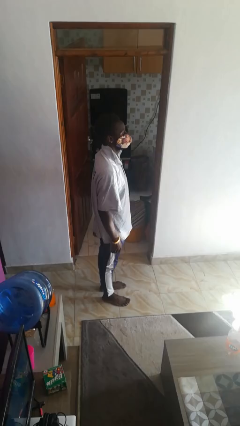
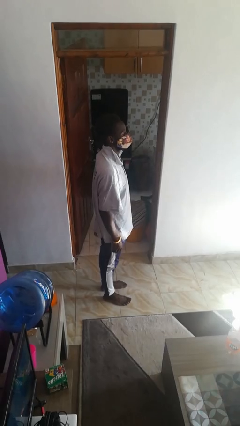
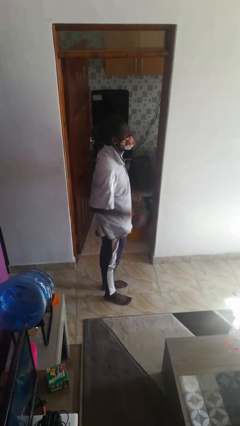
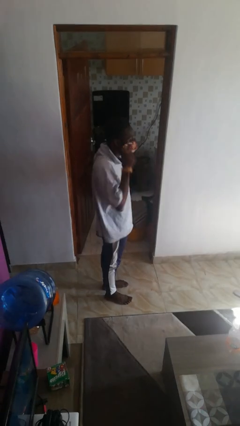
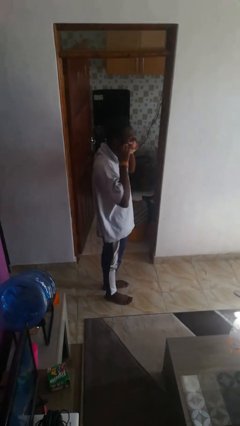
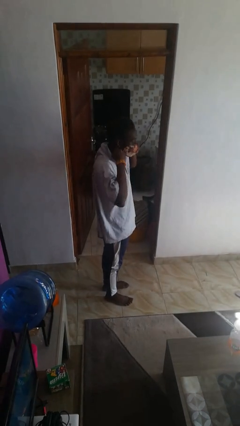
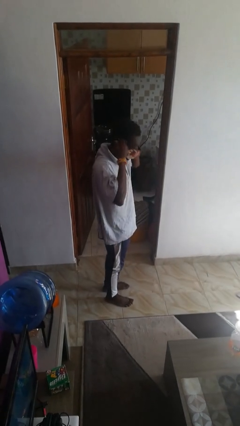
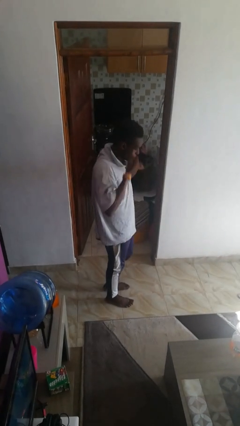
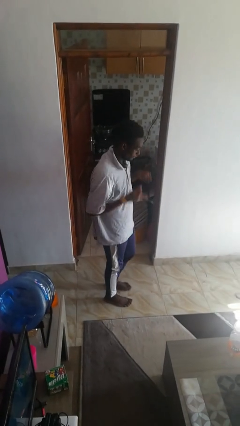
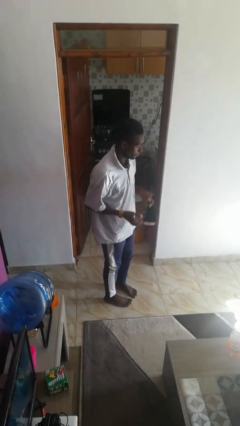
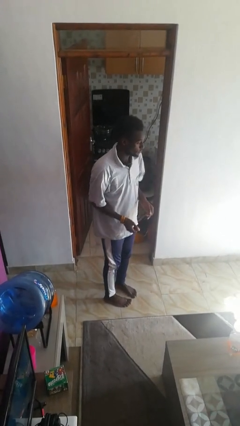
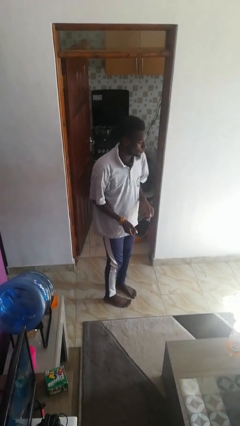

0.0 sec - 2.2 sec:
person takes off facemask

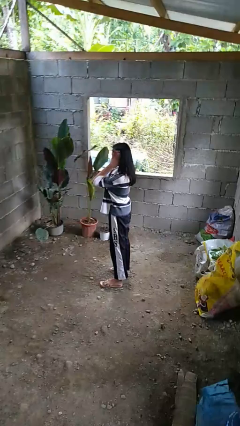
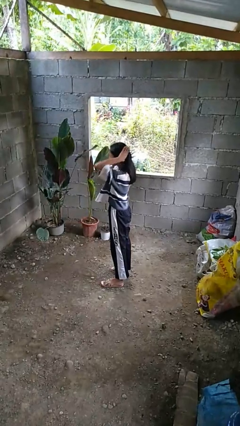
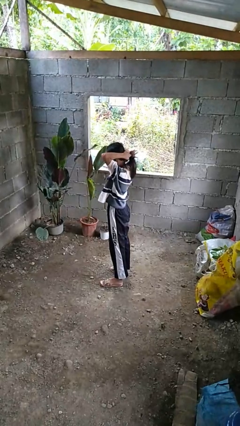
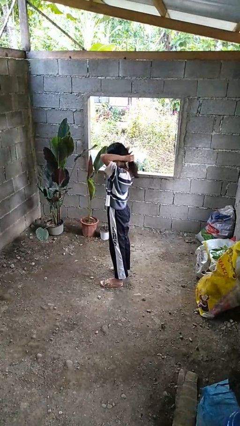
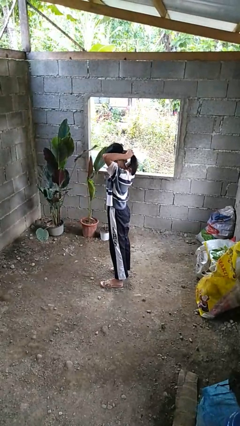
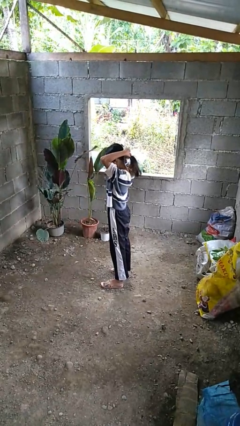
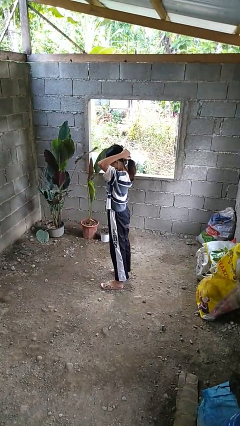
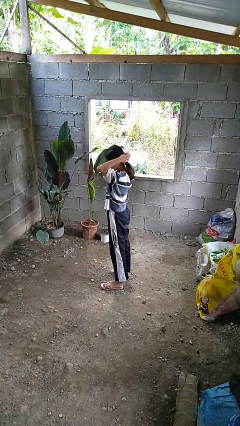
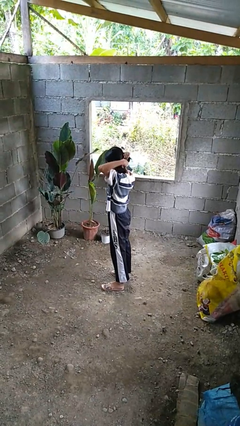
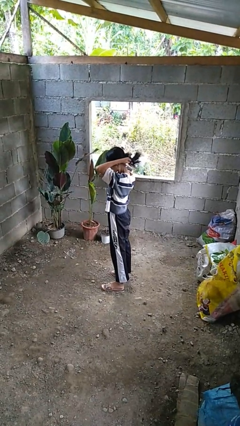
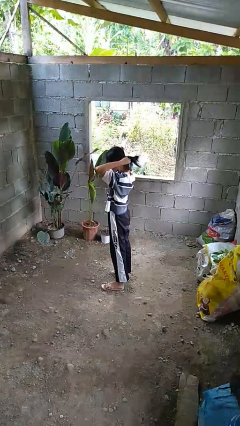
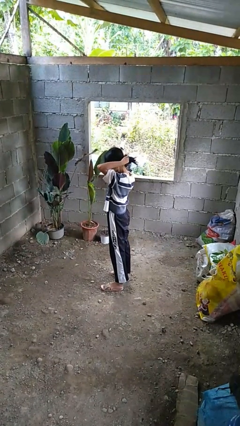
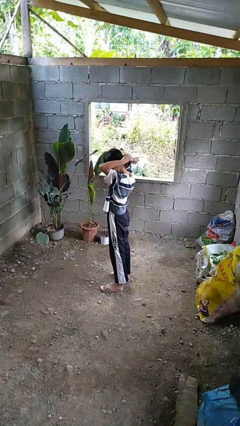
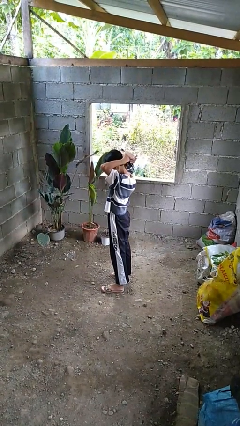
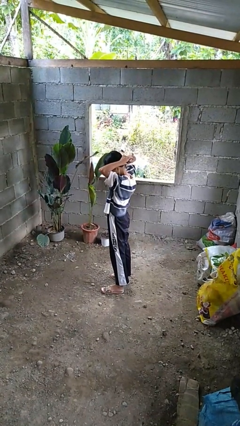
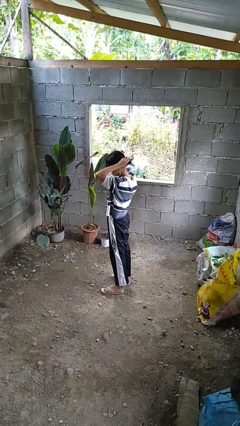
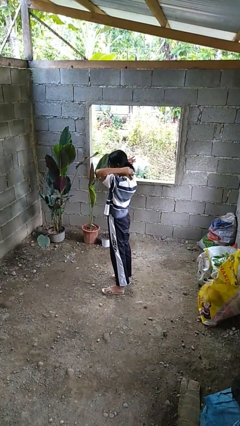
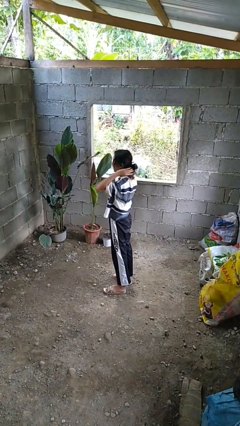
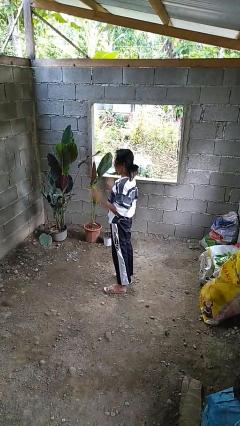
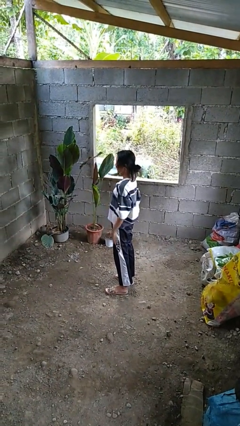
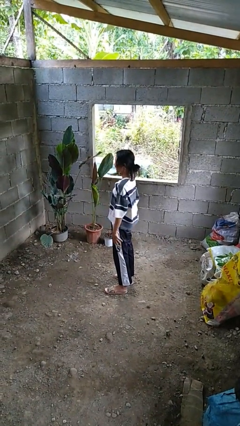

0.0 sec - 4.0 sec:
person puts hair in ponytail

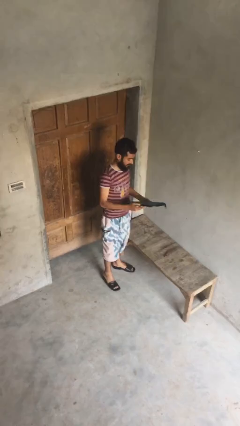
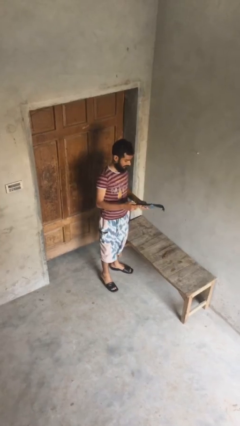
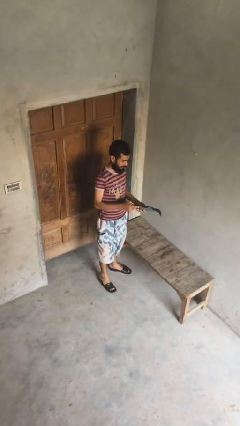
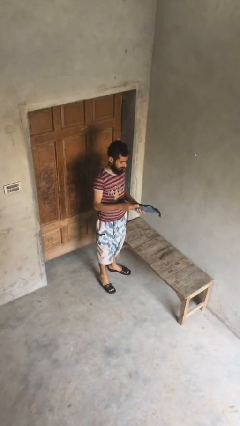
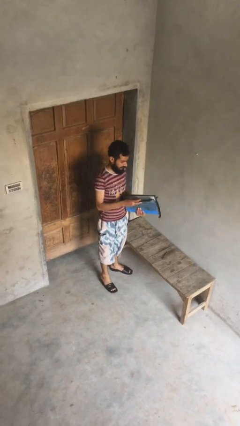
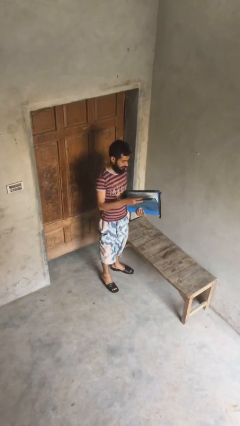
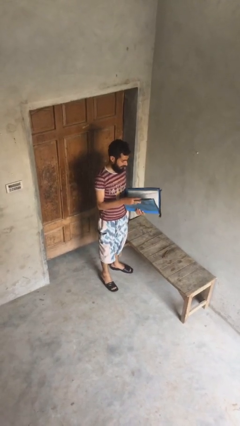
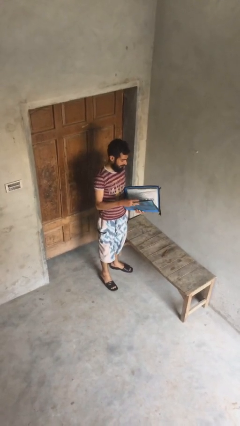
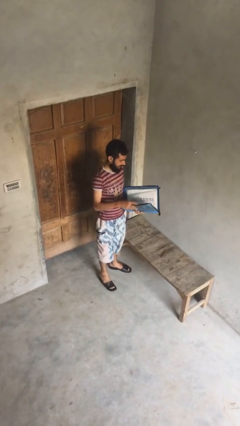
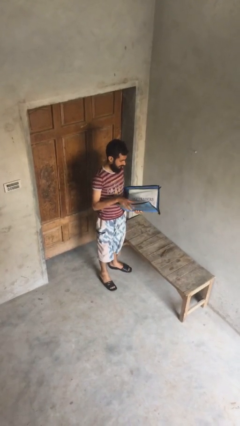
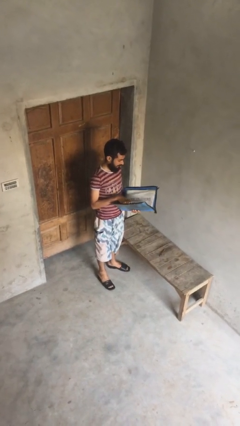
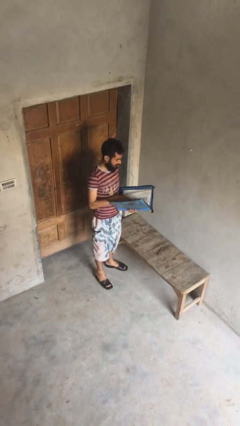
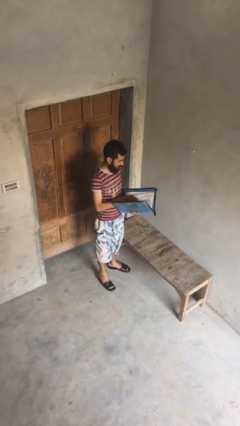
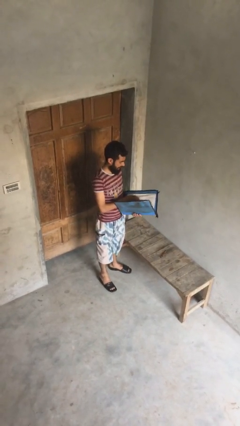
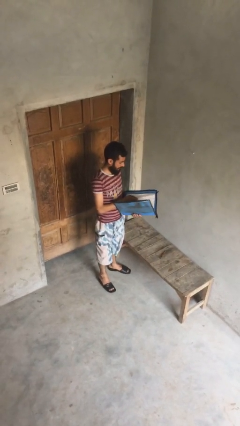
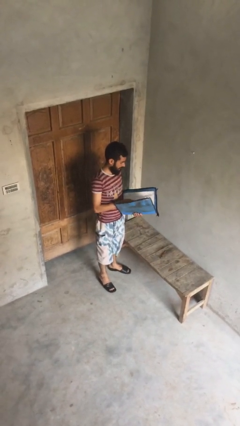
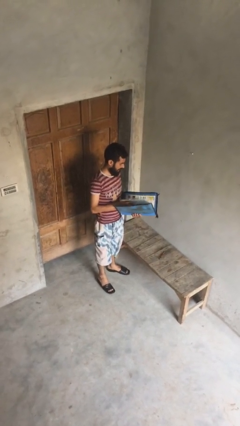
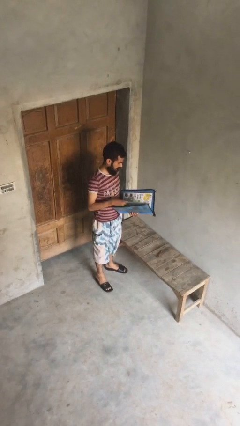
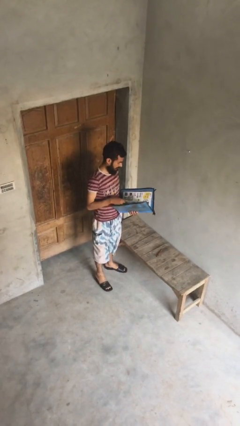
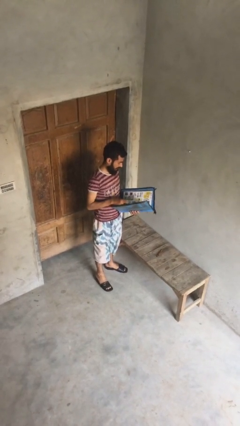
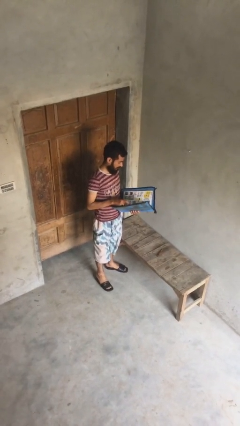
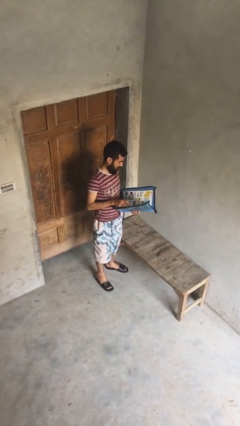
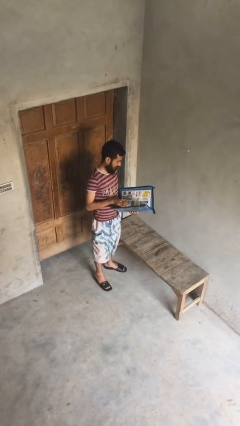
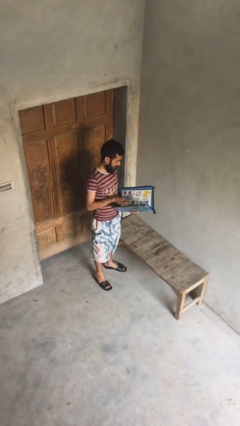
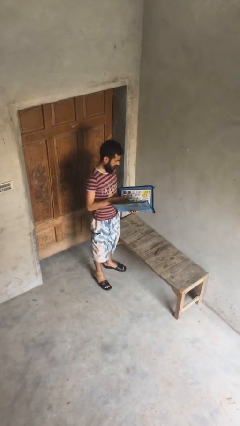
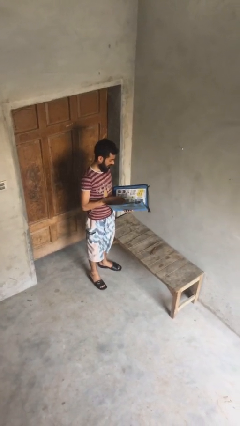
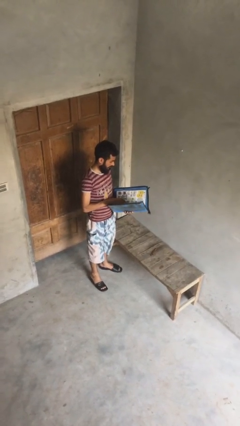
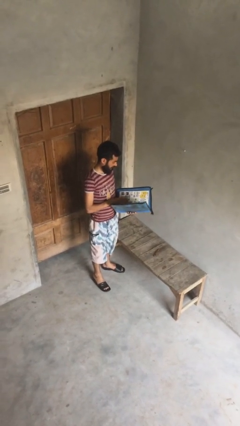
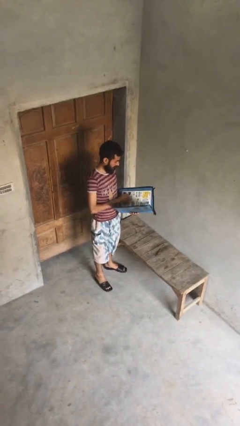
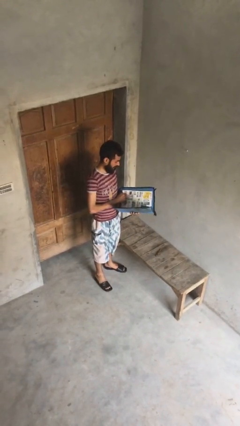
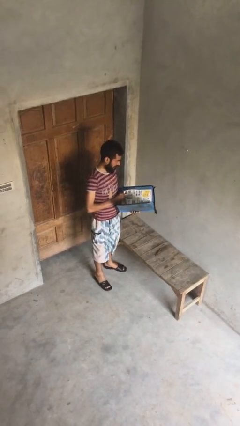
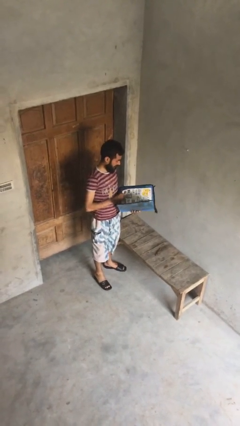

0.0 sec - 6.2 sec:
person reads document

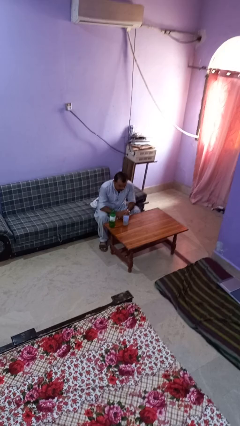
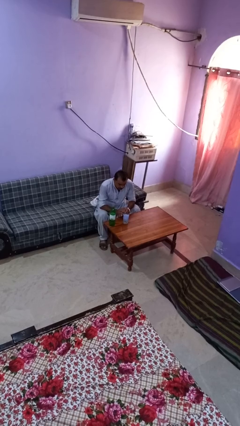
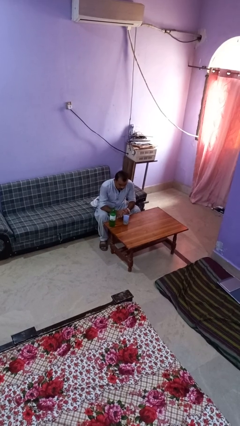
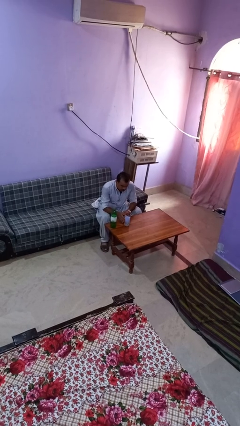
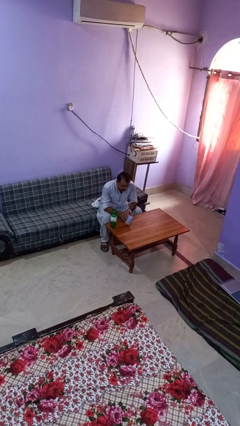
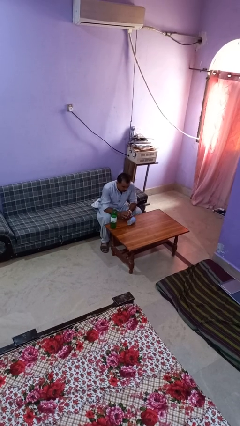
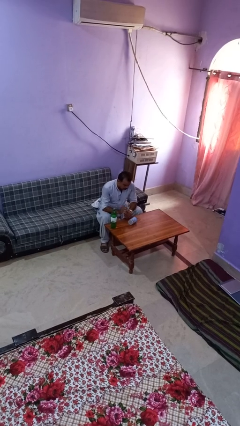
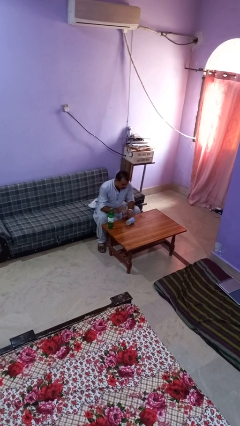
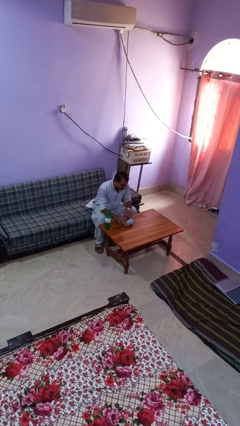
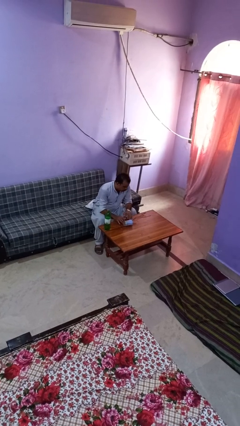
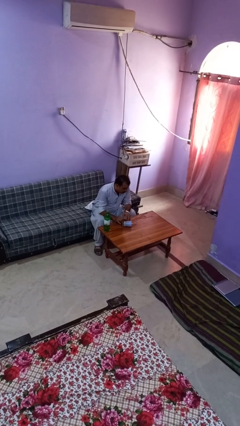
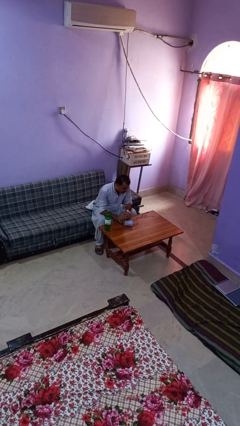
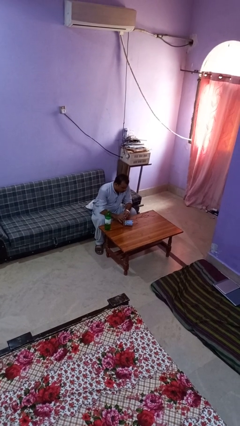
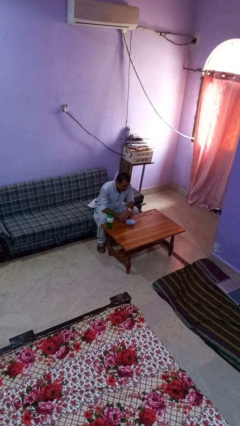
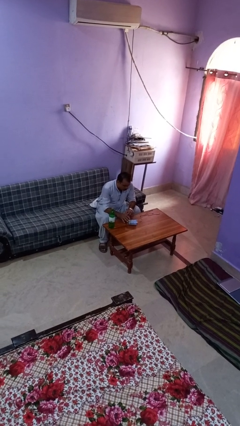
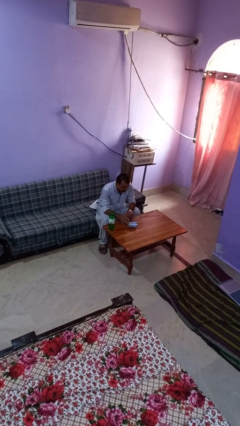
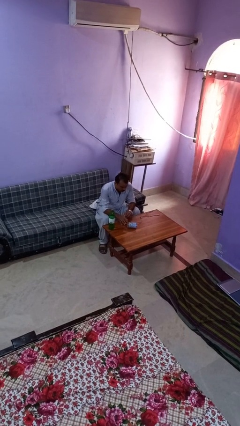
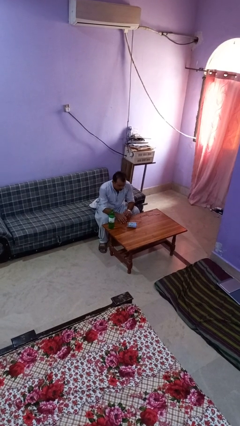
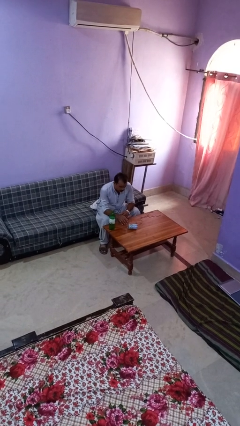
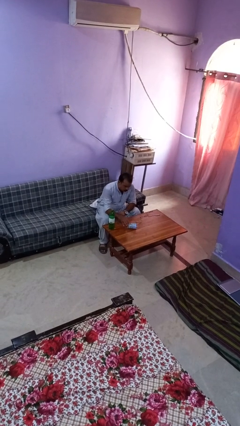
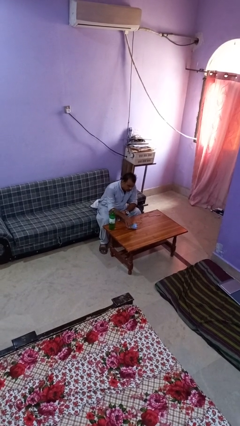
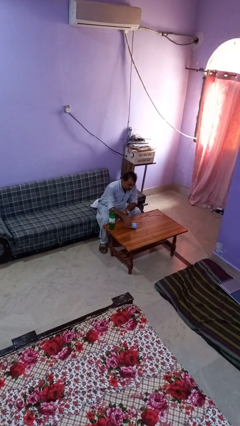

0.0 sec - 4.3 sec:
person spills on table

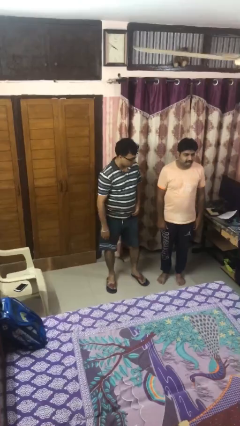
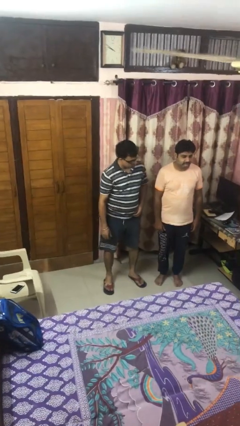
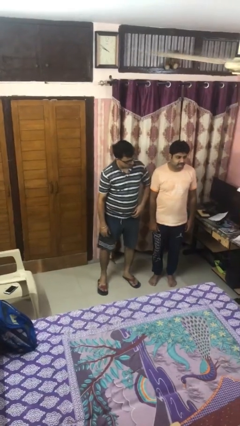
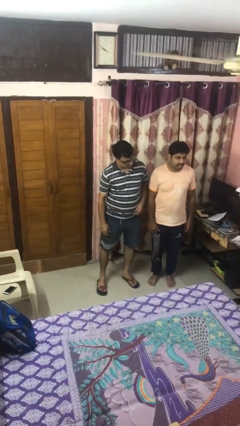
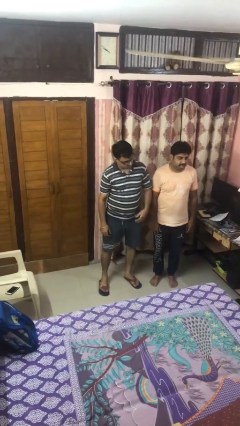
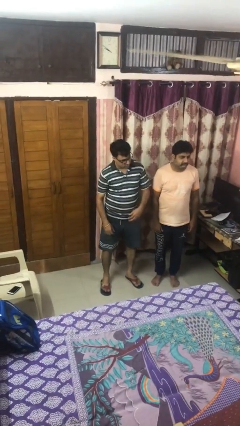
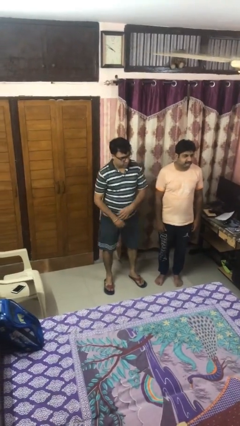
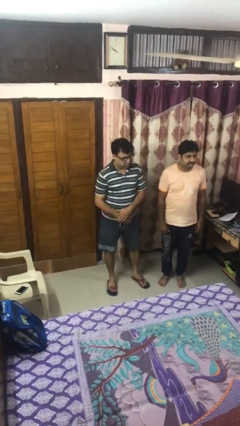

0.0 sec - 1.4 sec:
person nudges person with elbow
